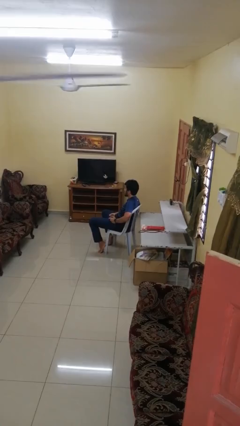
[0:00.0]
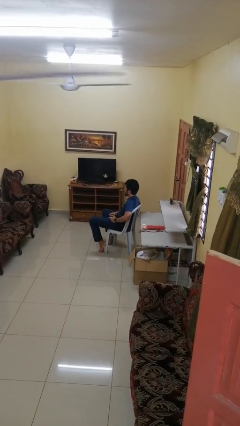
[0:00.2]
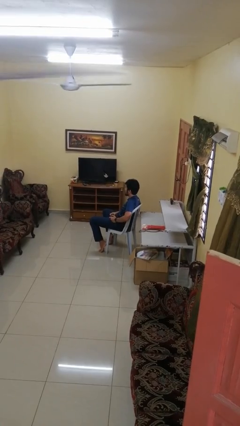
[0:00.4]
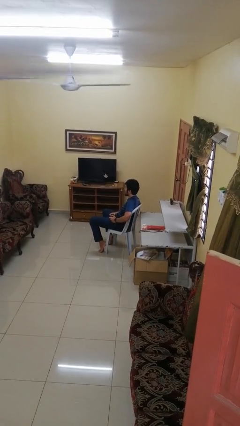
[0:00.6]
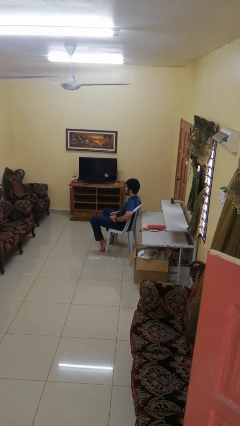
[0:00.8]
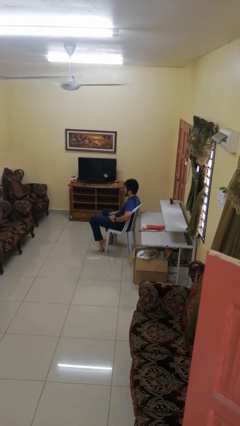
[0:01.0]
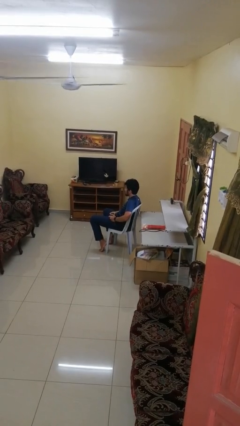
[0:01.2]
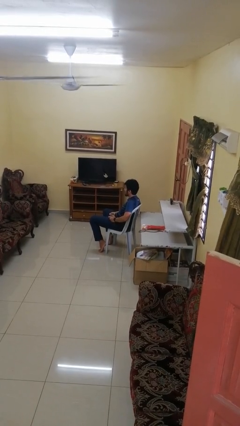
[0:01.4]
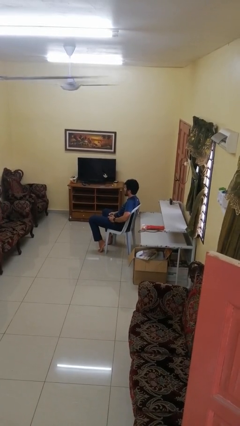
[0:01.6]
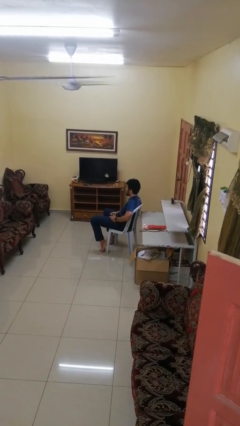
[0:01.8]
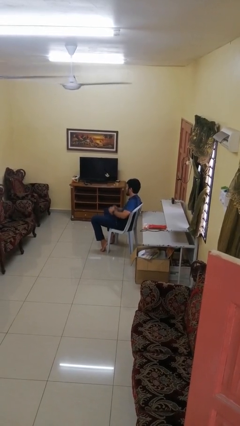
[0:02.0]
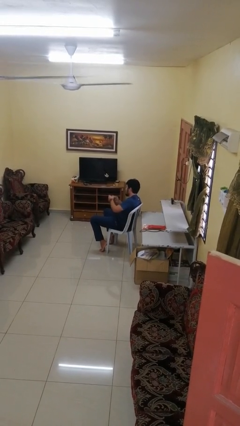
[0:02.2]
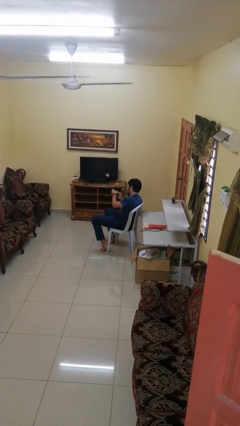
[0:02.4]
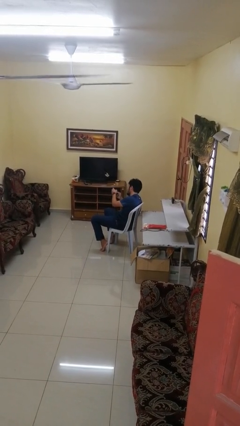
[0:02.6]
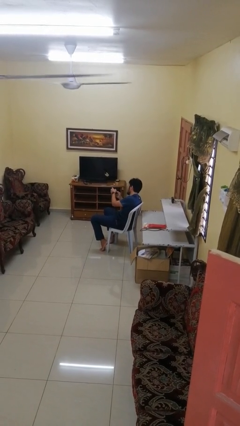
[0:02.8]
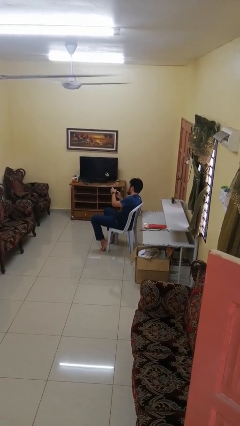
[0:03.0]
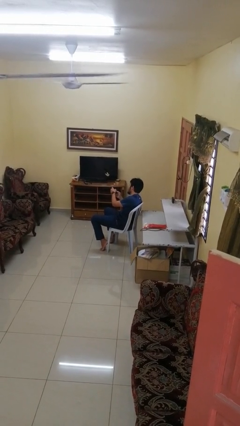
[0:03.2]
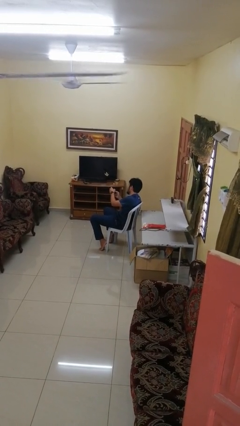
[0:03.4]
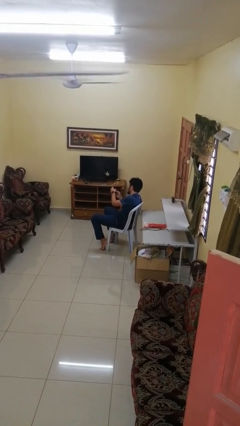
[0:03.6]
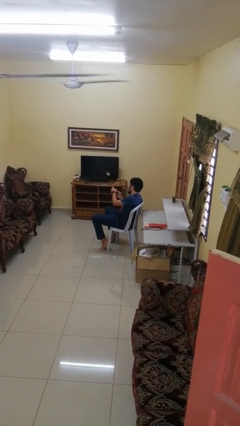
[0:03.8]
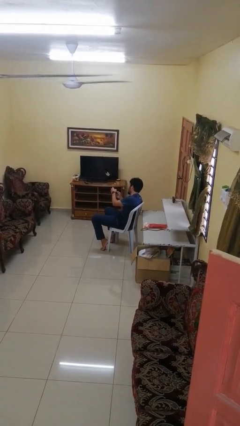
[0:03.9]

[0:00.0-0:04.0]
person interacts with handheld game

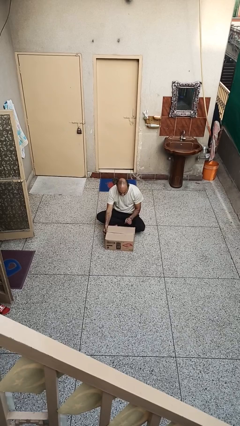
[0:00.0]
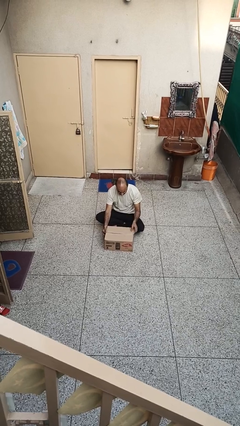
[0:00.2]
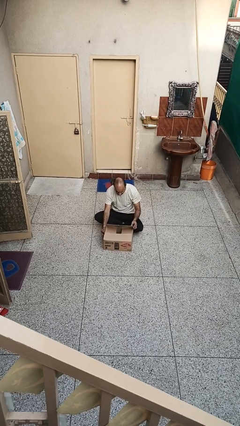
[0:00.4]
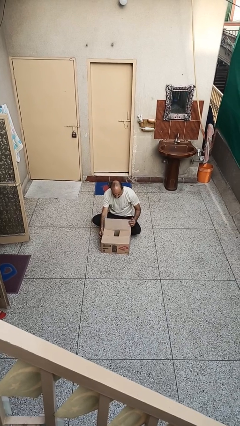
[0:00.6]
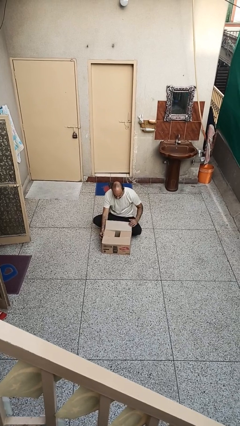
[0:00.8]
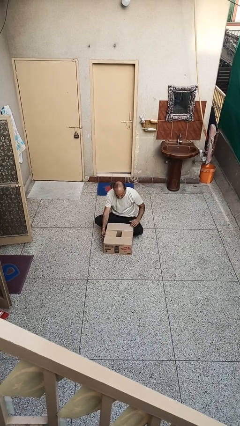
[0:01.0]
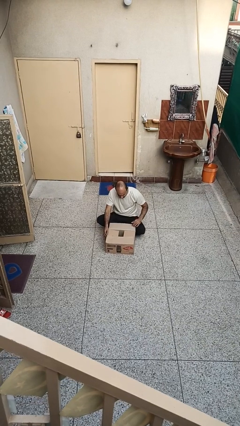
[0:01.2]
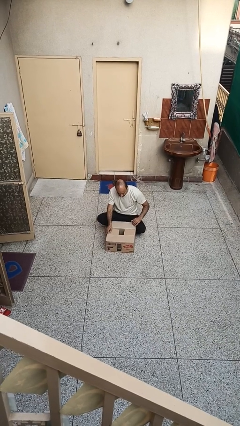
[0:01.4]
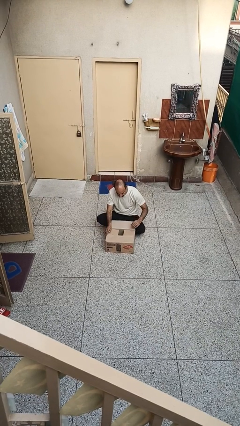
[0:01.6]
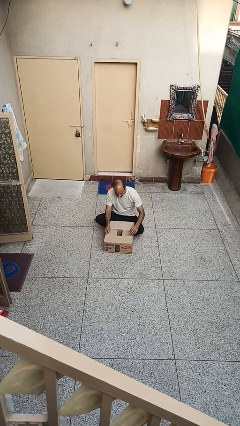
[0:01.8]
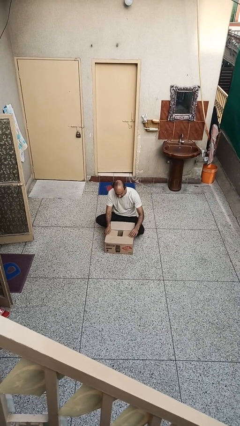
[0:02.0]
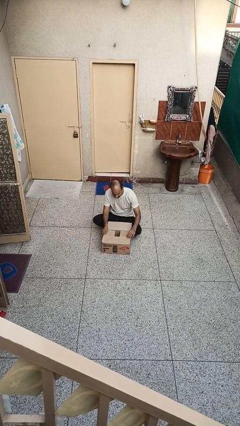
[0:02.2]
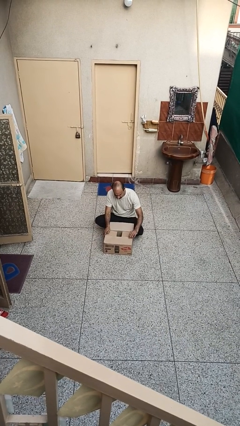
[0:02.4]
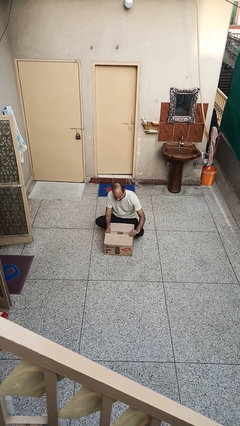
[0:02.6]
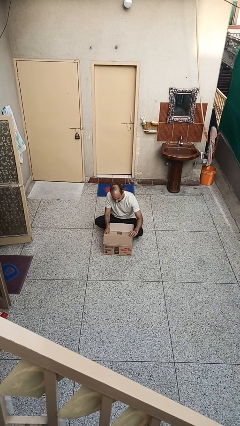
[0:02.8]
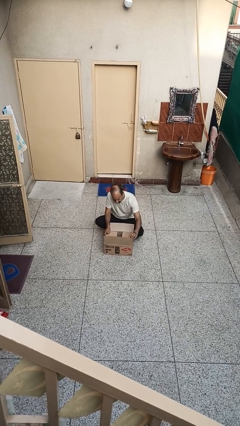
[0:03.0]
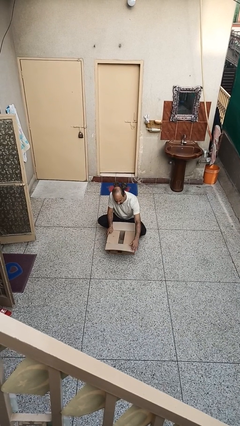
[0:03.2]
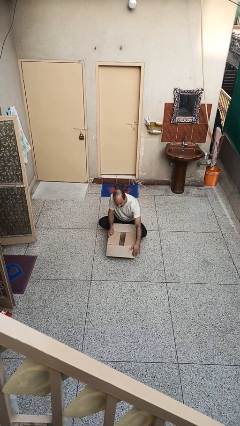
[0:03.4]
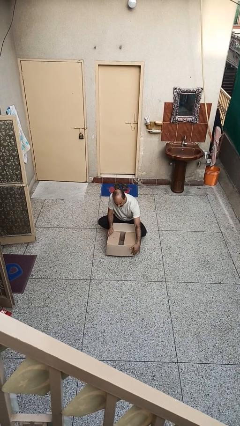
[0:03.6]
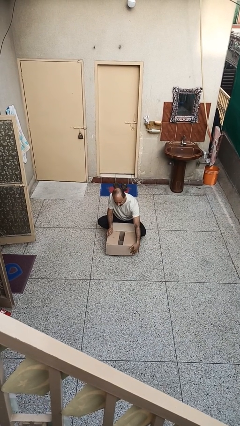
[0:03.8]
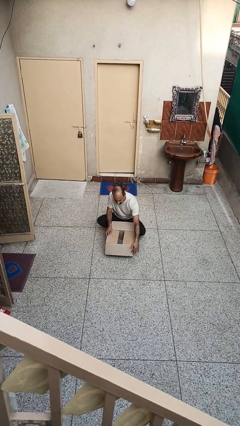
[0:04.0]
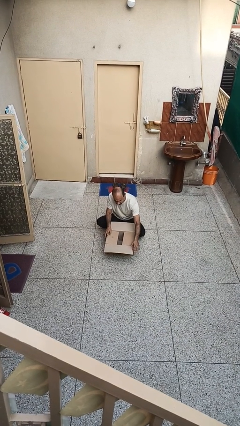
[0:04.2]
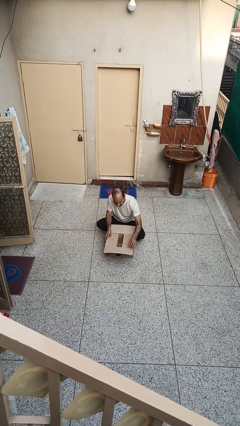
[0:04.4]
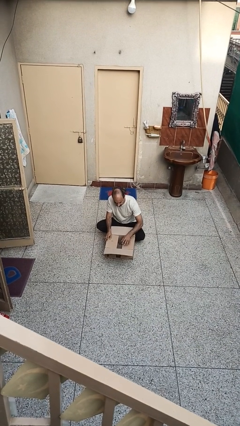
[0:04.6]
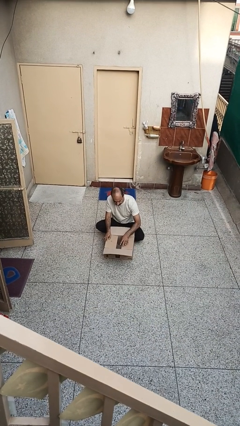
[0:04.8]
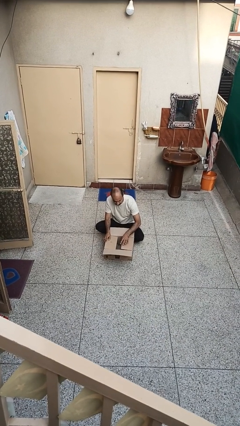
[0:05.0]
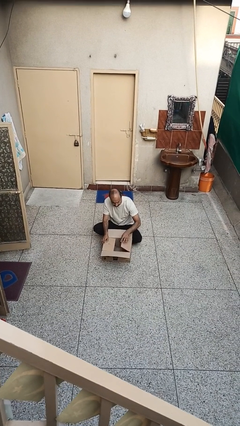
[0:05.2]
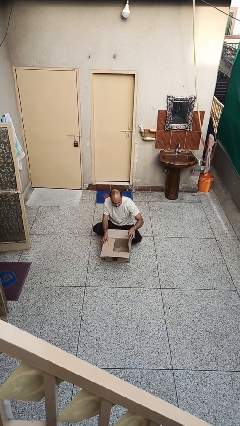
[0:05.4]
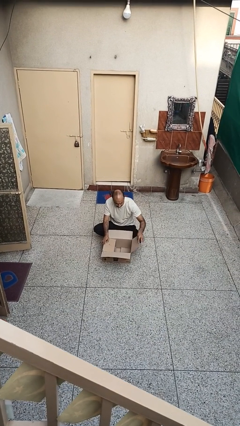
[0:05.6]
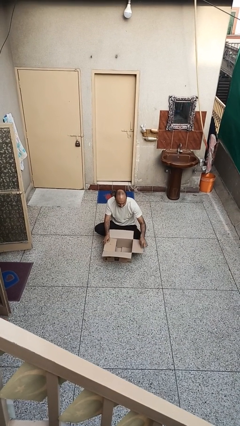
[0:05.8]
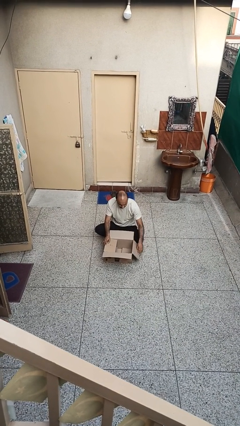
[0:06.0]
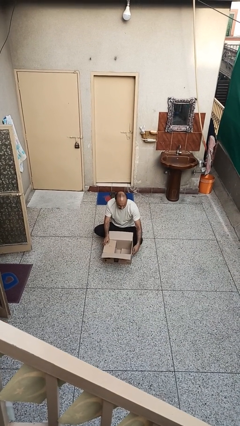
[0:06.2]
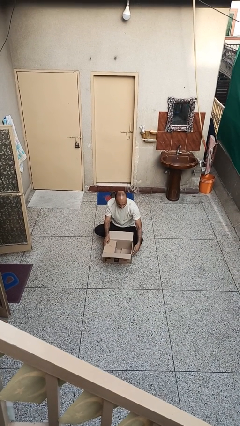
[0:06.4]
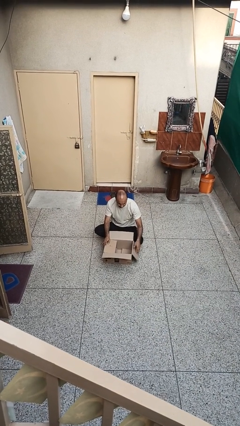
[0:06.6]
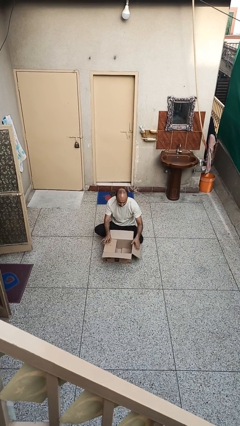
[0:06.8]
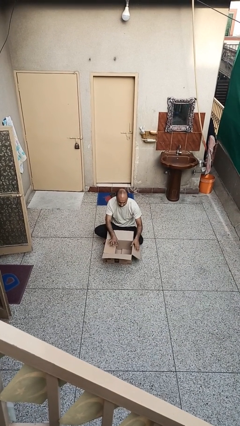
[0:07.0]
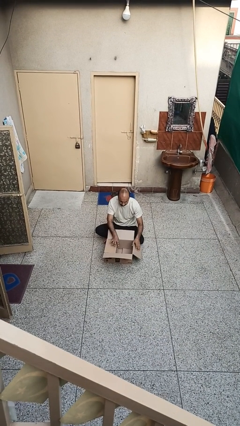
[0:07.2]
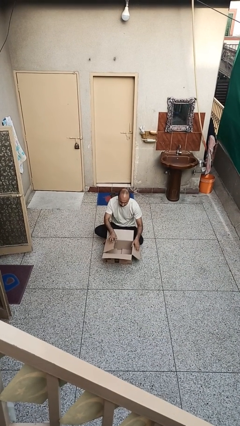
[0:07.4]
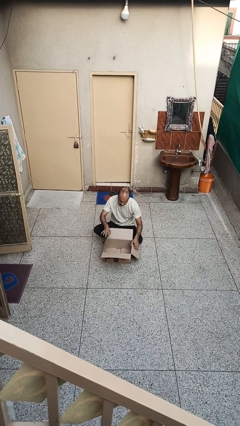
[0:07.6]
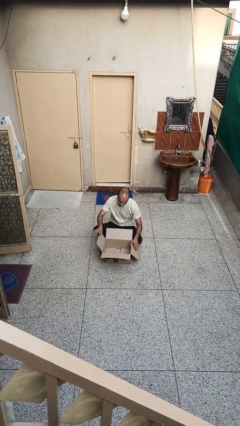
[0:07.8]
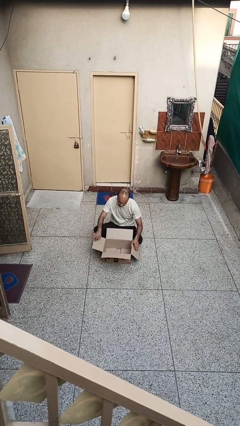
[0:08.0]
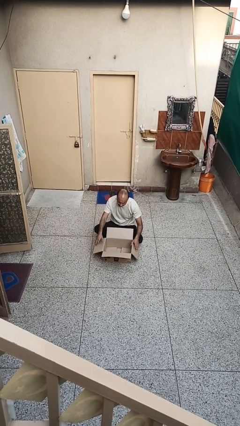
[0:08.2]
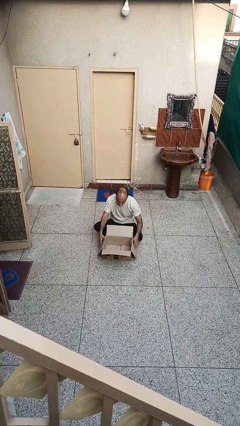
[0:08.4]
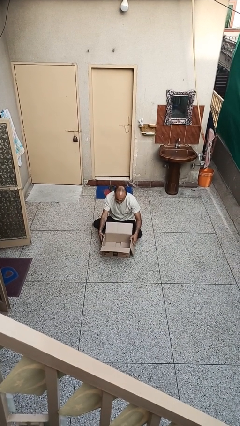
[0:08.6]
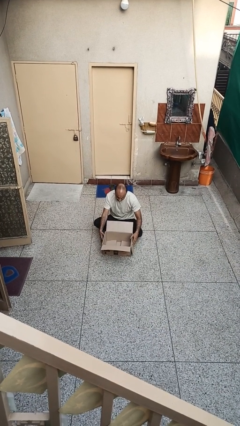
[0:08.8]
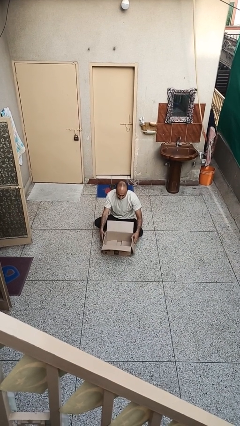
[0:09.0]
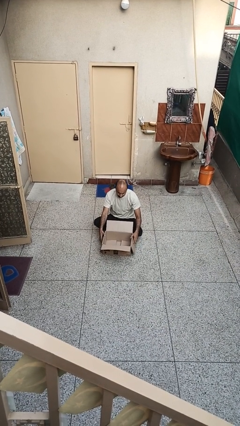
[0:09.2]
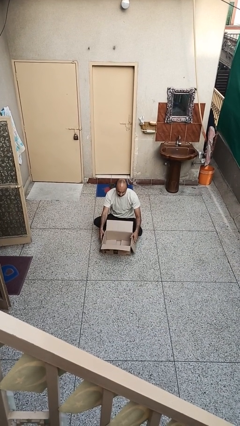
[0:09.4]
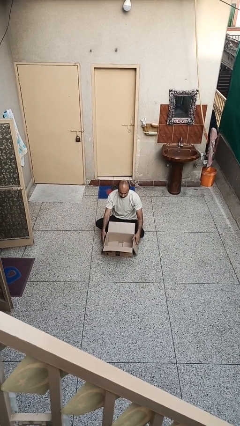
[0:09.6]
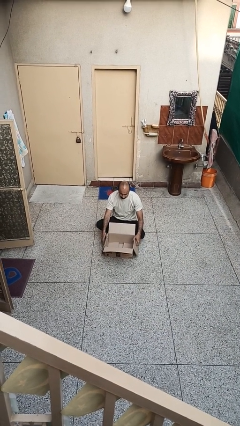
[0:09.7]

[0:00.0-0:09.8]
person opens box

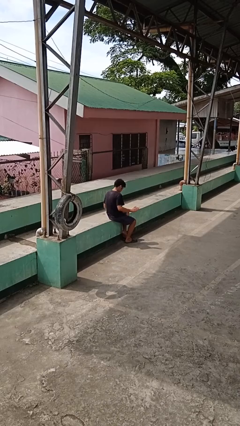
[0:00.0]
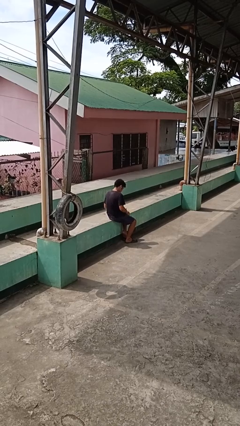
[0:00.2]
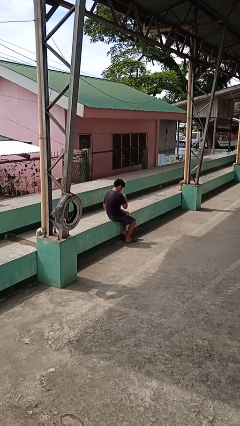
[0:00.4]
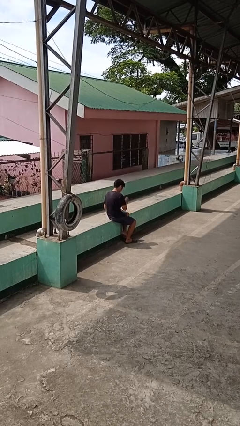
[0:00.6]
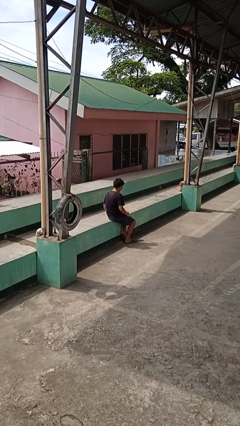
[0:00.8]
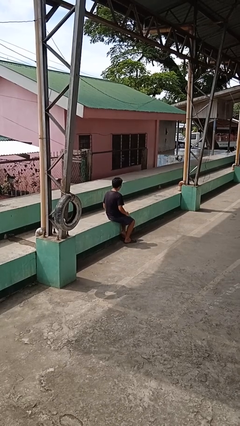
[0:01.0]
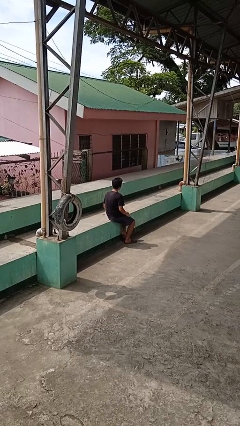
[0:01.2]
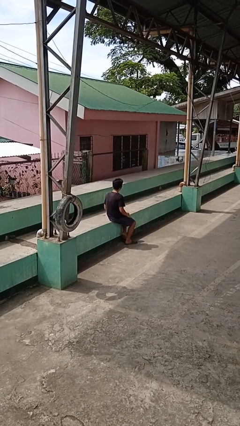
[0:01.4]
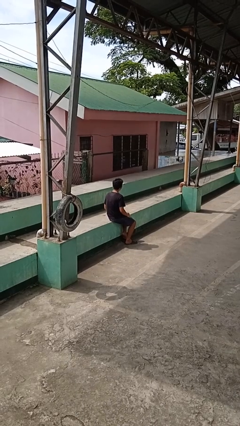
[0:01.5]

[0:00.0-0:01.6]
person slaps hands on thighs

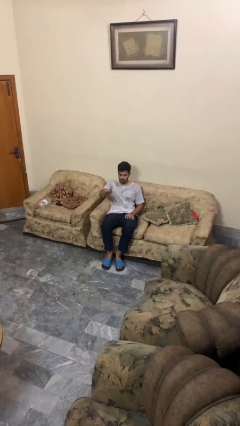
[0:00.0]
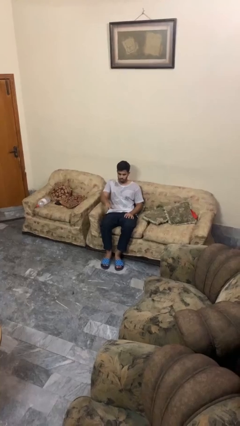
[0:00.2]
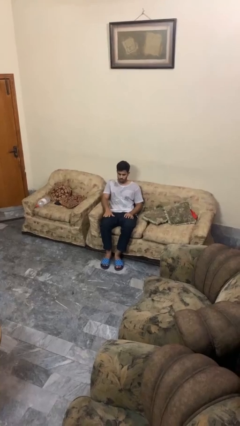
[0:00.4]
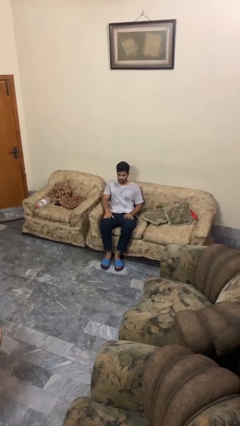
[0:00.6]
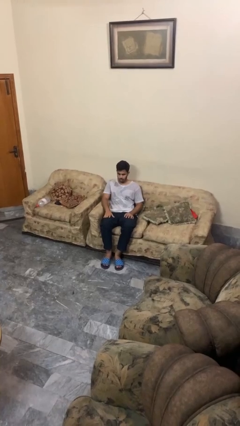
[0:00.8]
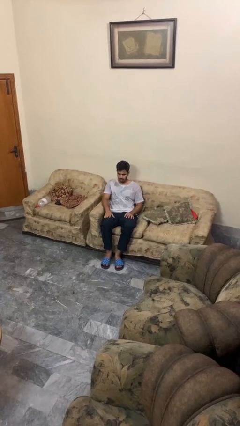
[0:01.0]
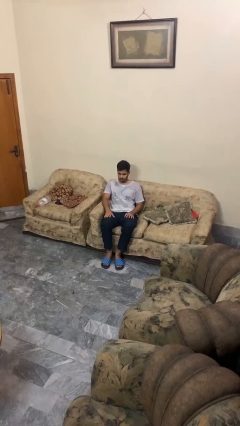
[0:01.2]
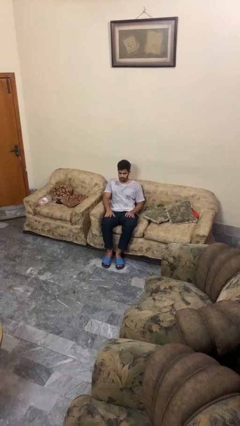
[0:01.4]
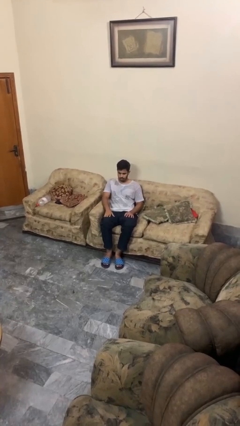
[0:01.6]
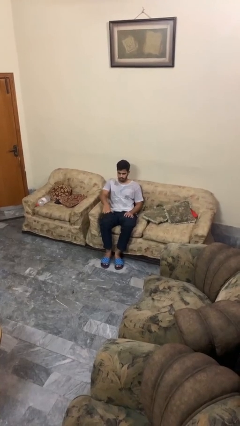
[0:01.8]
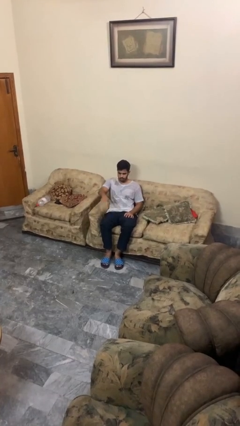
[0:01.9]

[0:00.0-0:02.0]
person gestures lower hand

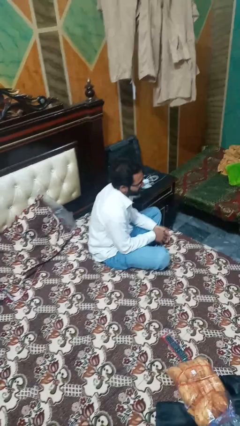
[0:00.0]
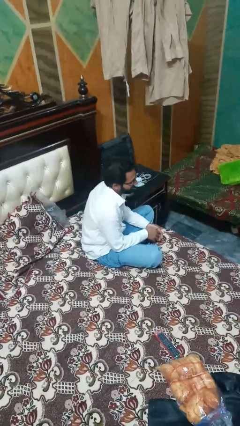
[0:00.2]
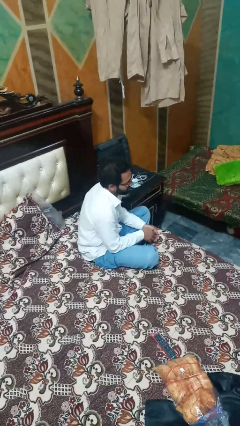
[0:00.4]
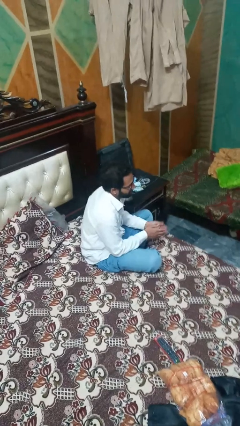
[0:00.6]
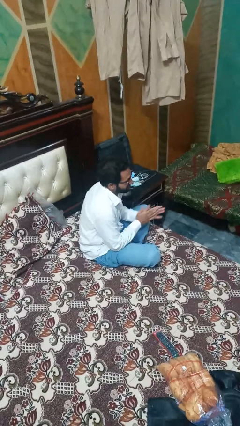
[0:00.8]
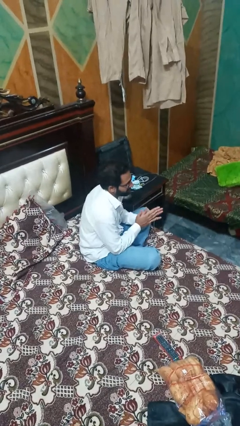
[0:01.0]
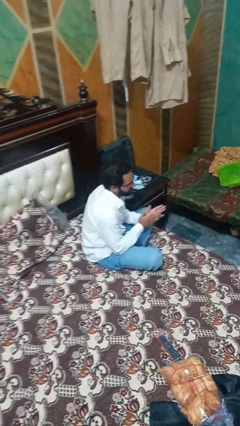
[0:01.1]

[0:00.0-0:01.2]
person claps hands
